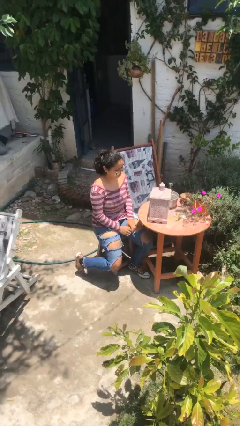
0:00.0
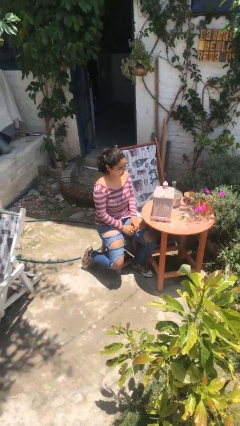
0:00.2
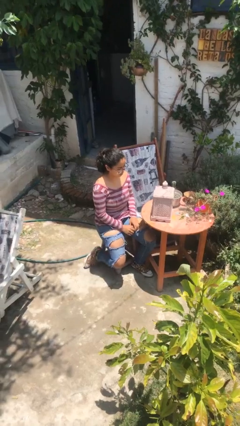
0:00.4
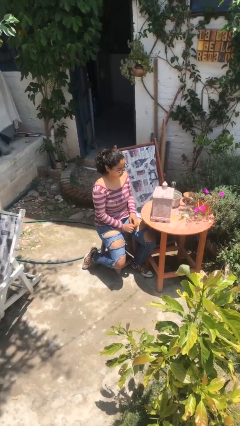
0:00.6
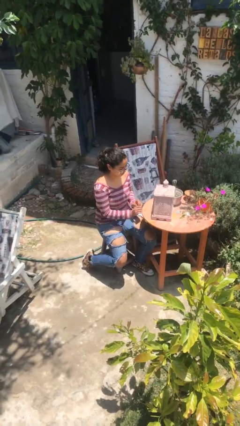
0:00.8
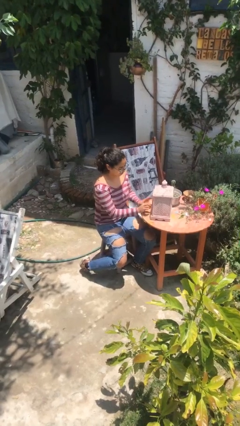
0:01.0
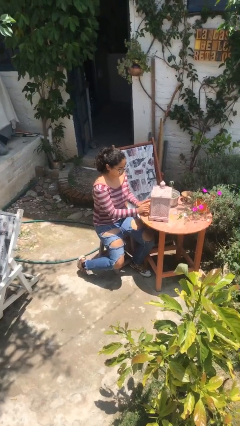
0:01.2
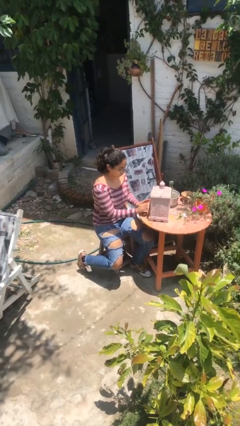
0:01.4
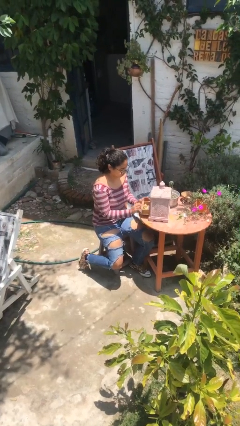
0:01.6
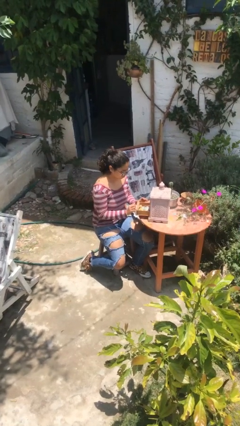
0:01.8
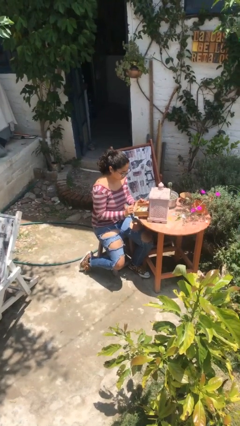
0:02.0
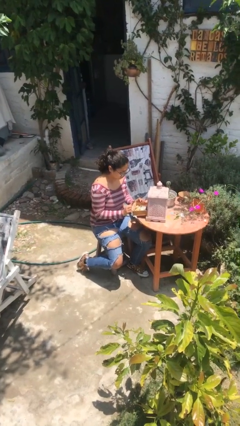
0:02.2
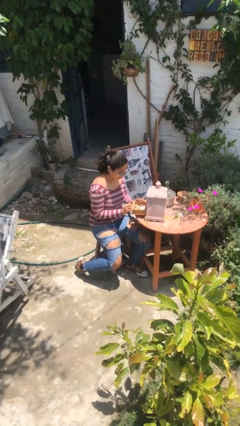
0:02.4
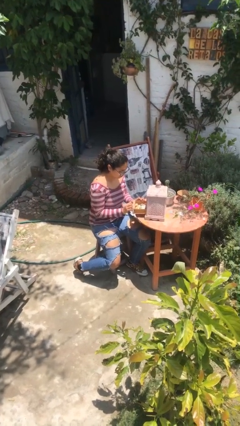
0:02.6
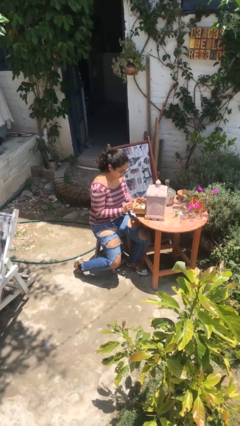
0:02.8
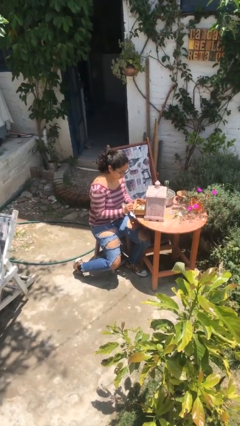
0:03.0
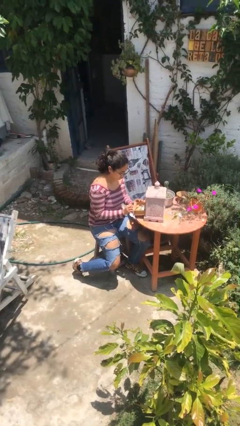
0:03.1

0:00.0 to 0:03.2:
person opens jewelry box

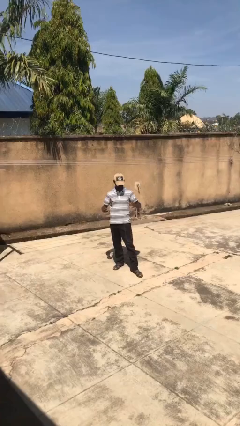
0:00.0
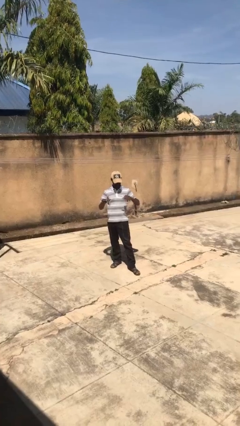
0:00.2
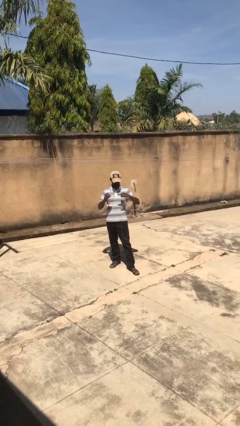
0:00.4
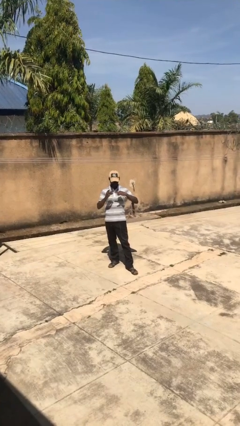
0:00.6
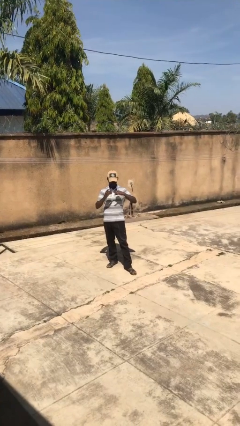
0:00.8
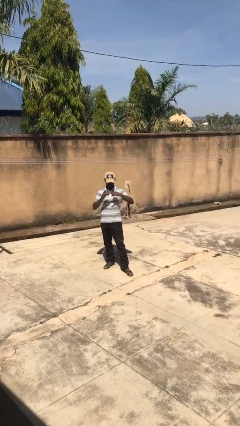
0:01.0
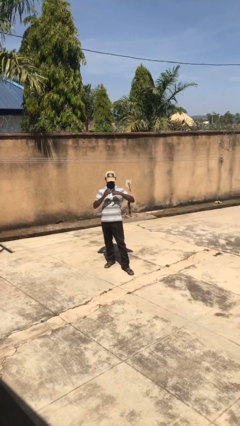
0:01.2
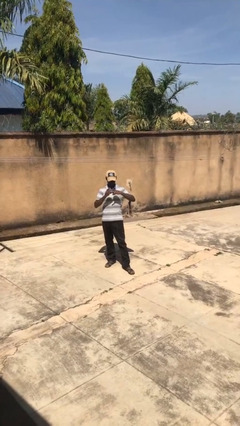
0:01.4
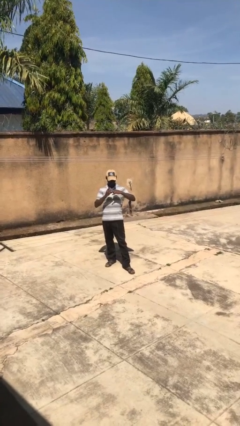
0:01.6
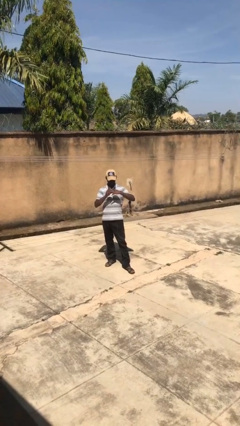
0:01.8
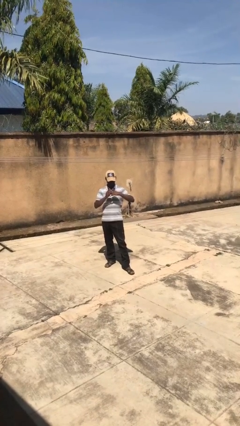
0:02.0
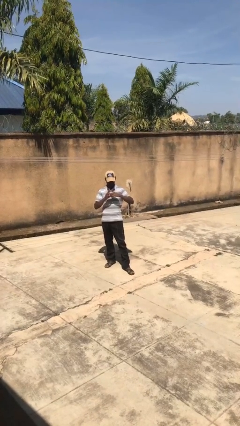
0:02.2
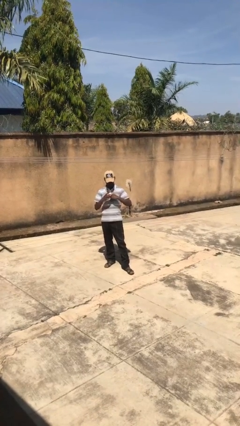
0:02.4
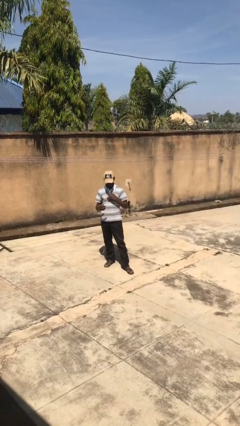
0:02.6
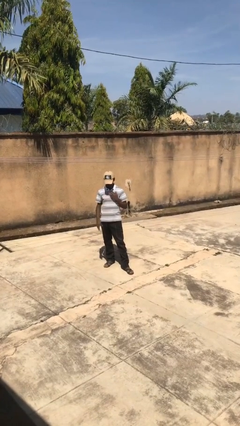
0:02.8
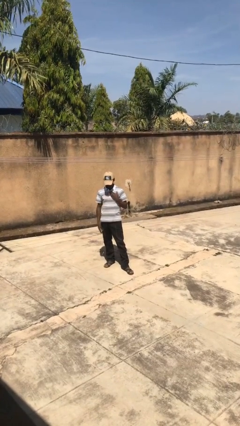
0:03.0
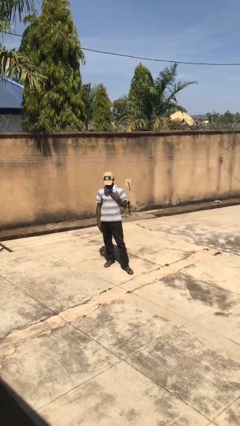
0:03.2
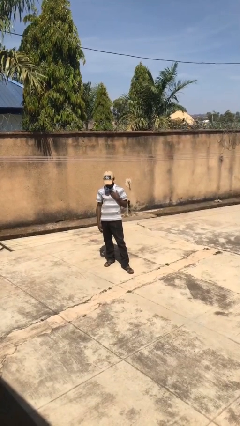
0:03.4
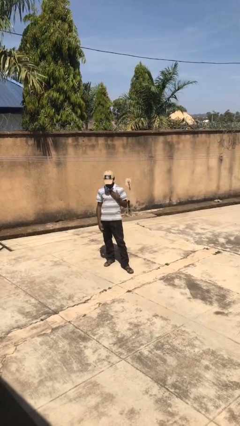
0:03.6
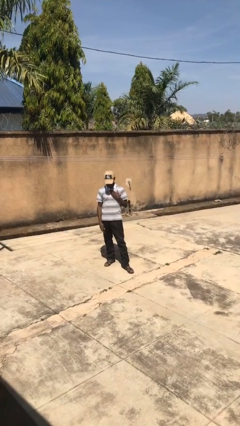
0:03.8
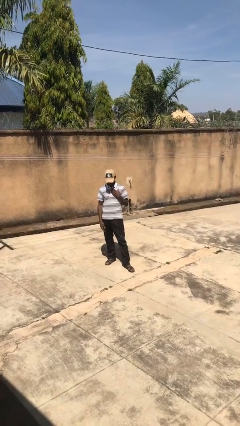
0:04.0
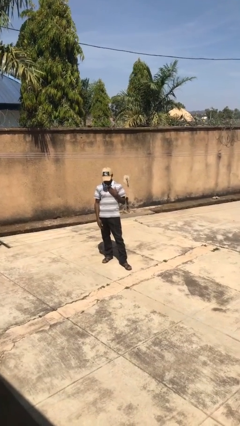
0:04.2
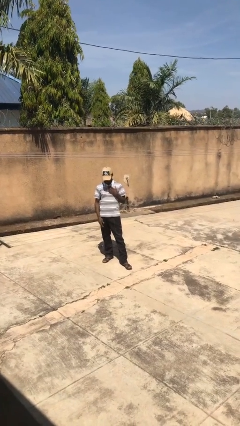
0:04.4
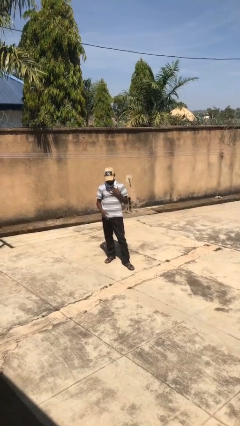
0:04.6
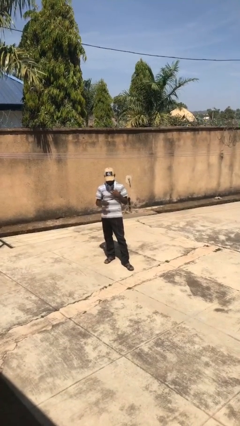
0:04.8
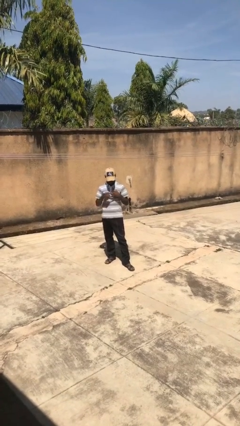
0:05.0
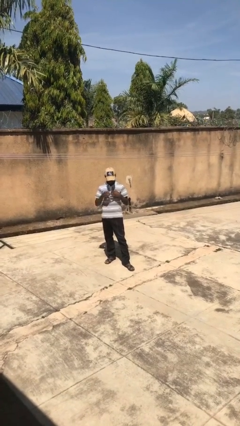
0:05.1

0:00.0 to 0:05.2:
person puts on ring

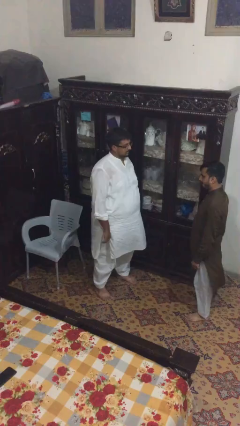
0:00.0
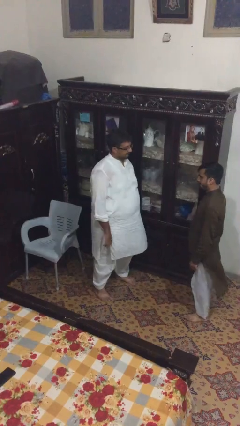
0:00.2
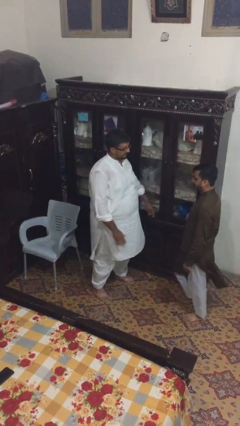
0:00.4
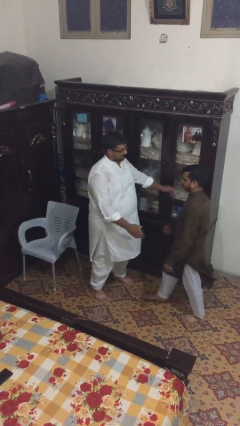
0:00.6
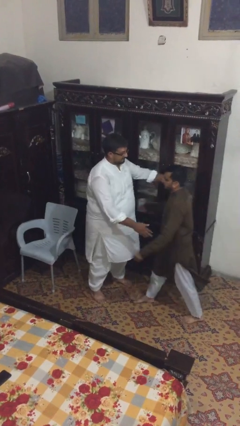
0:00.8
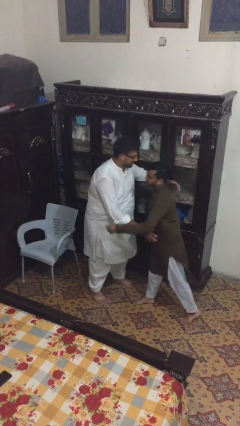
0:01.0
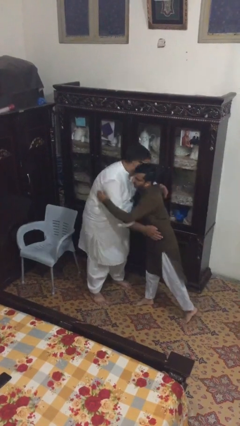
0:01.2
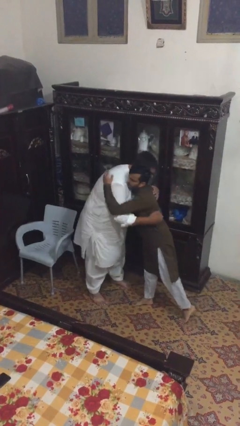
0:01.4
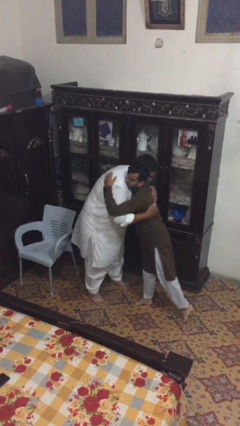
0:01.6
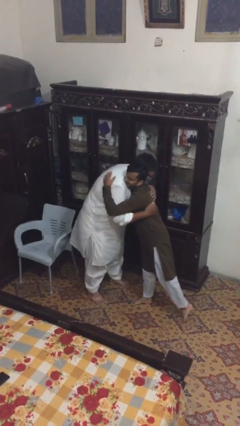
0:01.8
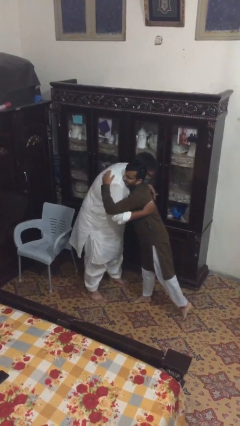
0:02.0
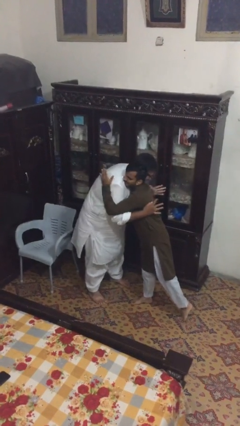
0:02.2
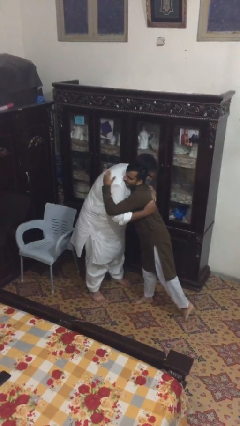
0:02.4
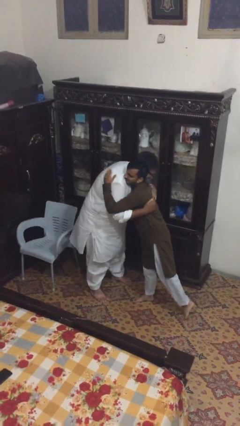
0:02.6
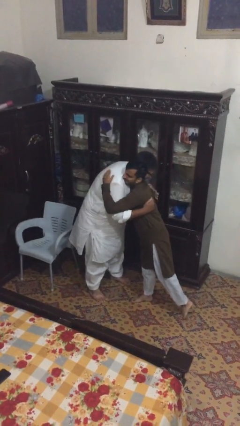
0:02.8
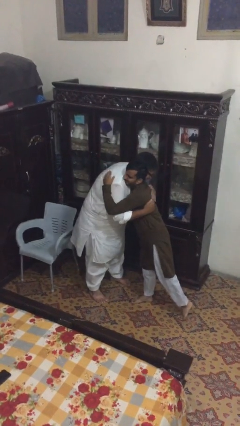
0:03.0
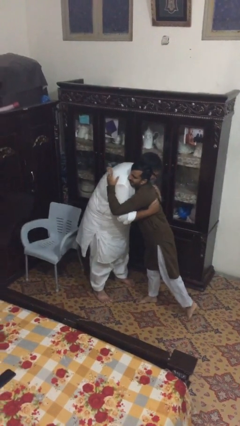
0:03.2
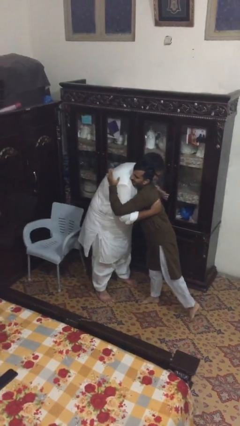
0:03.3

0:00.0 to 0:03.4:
person embraces person

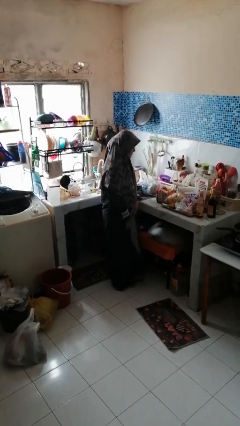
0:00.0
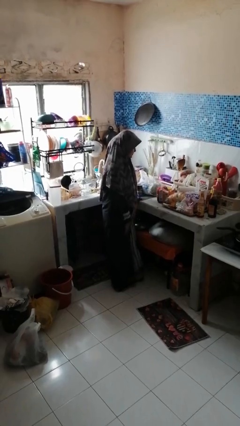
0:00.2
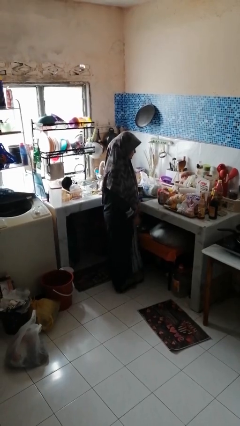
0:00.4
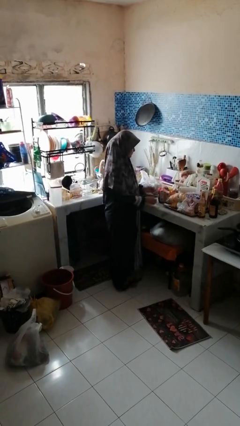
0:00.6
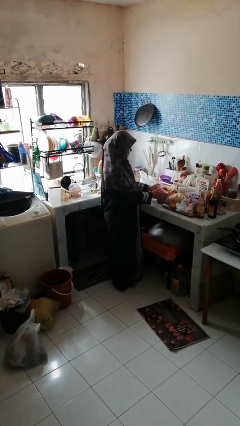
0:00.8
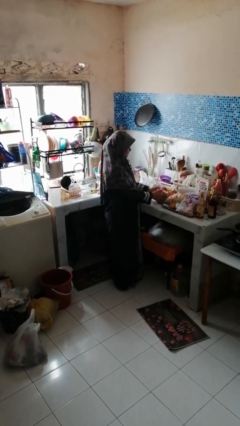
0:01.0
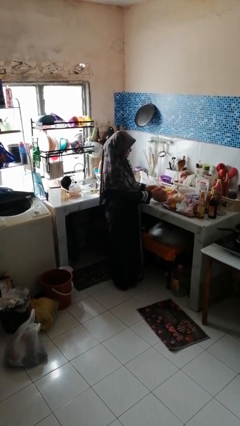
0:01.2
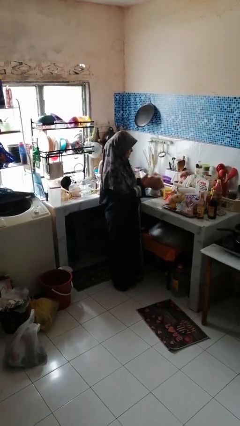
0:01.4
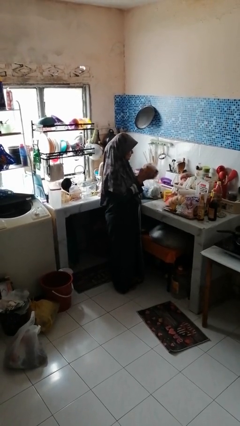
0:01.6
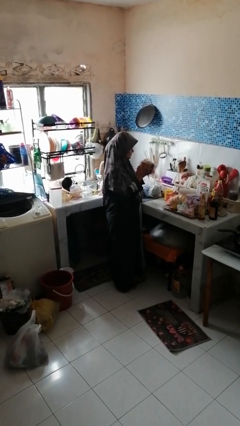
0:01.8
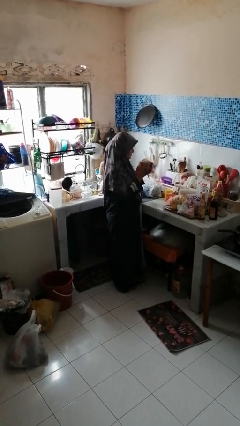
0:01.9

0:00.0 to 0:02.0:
person picks up object from countertop

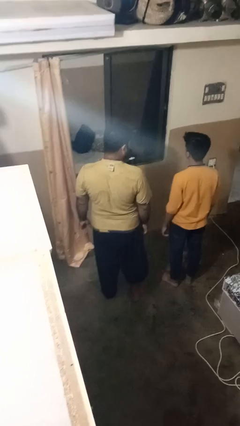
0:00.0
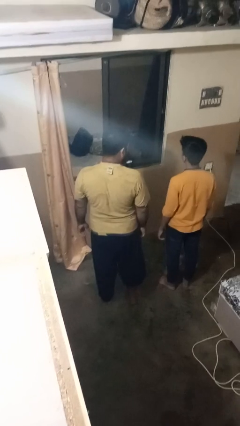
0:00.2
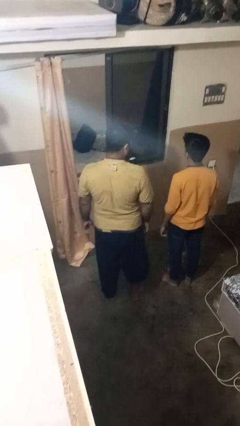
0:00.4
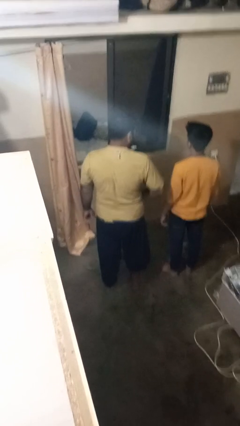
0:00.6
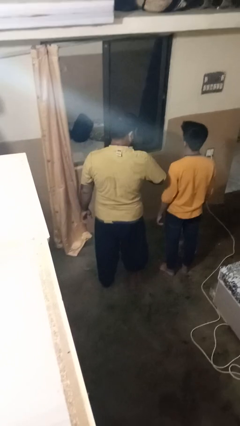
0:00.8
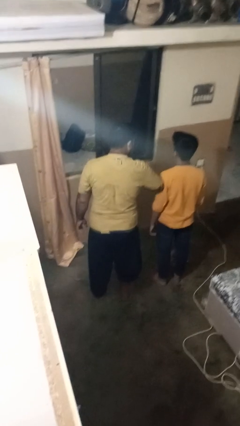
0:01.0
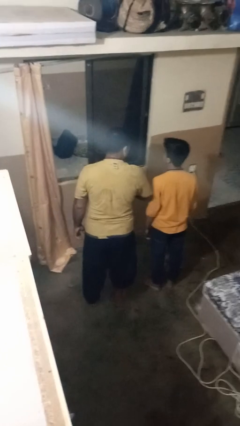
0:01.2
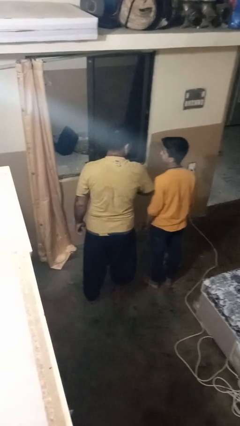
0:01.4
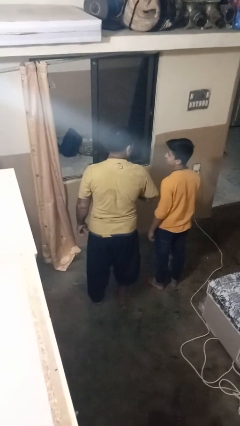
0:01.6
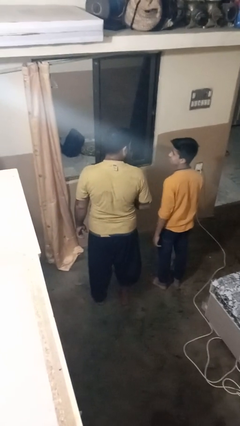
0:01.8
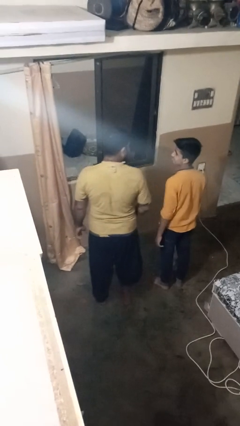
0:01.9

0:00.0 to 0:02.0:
person nudges person with elbow

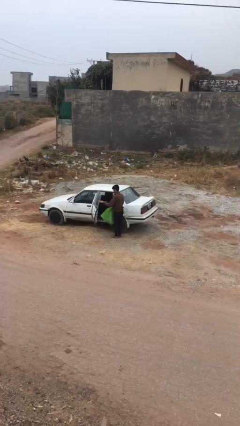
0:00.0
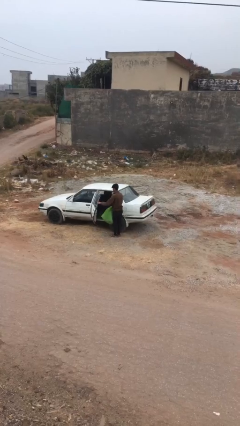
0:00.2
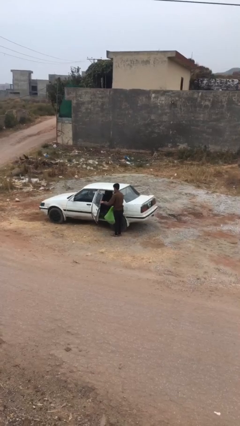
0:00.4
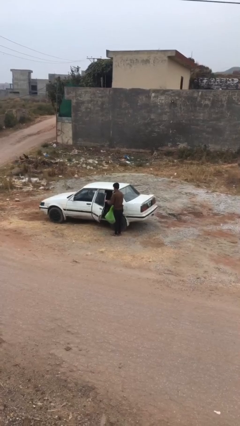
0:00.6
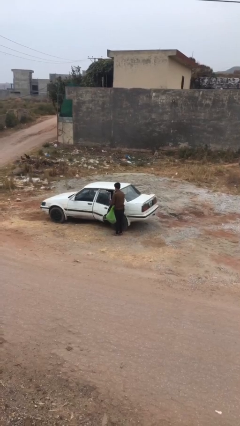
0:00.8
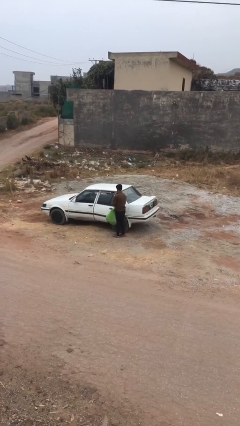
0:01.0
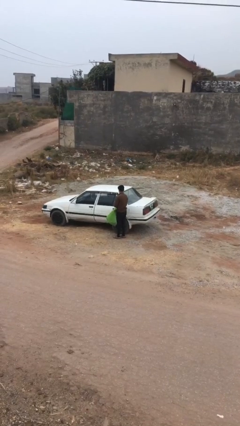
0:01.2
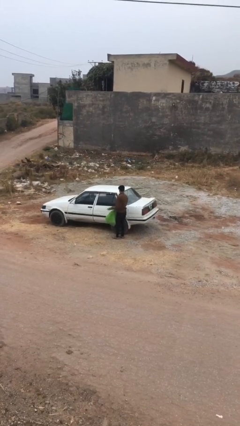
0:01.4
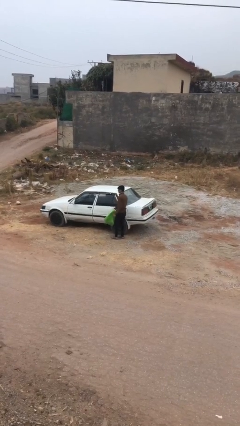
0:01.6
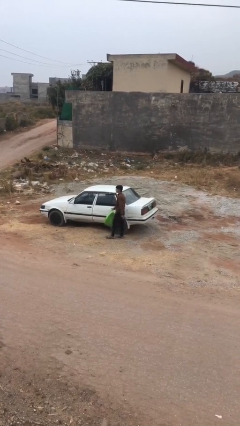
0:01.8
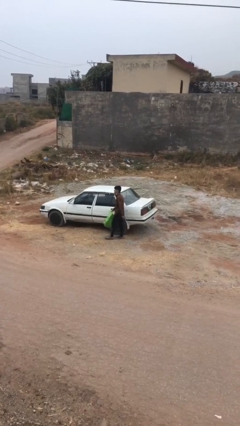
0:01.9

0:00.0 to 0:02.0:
person closes car door
